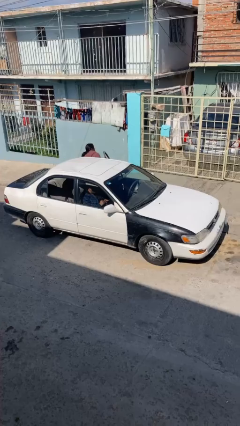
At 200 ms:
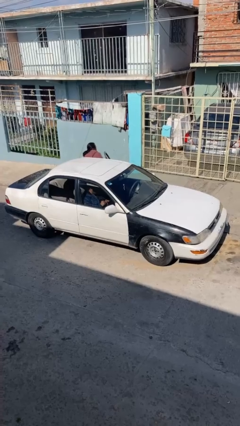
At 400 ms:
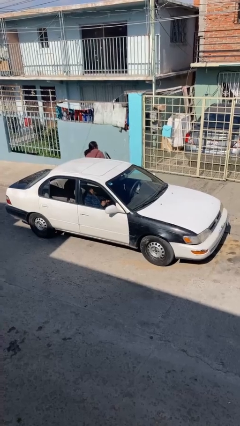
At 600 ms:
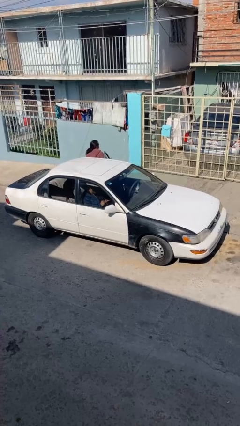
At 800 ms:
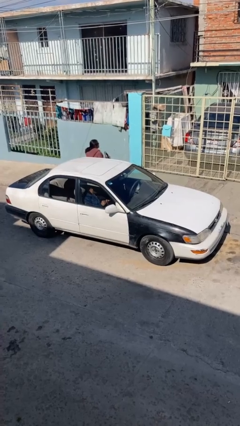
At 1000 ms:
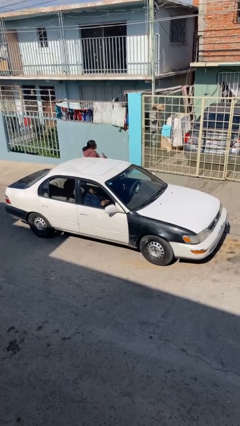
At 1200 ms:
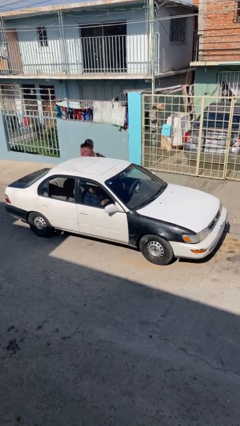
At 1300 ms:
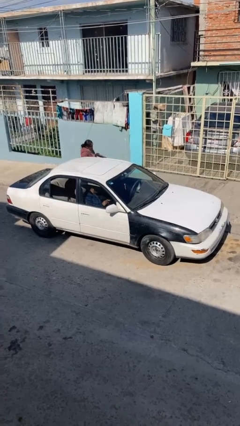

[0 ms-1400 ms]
car drops off person

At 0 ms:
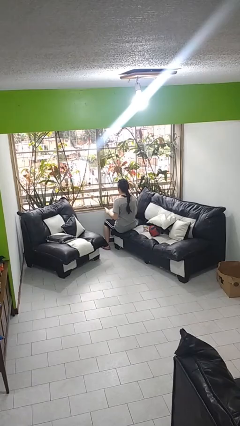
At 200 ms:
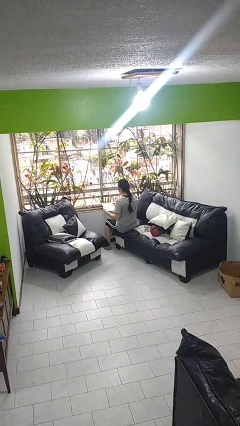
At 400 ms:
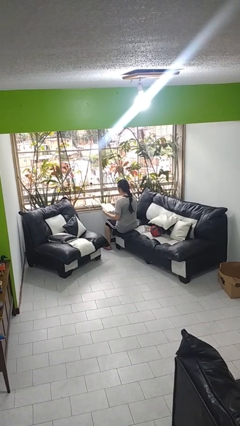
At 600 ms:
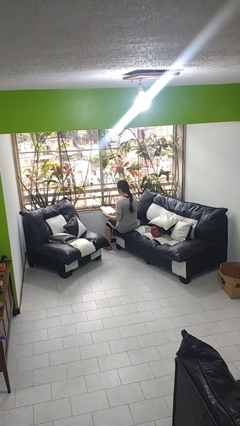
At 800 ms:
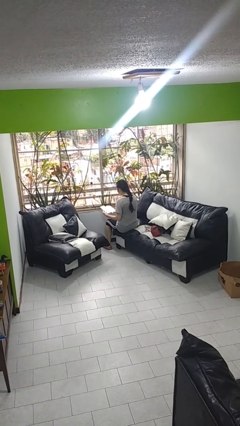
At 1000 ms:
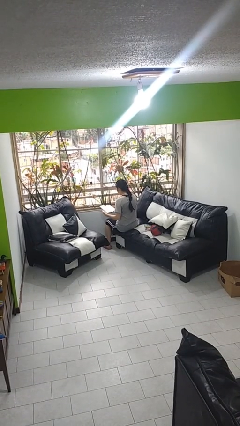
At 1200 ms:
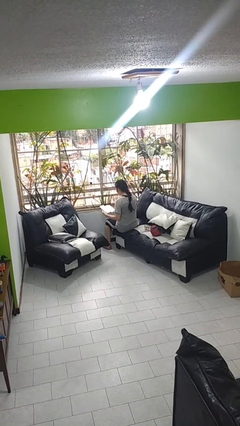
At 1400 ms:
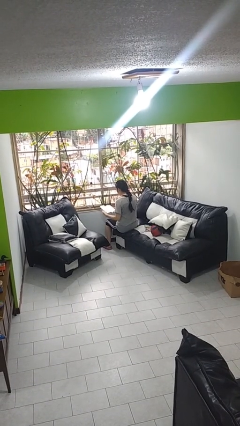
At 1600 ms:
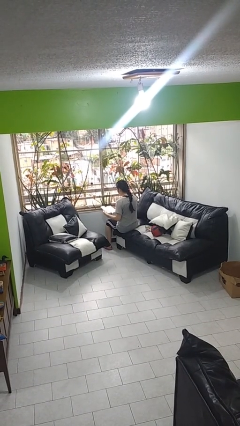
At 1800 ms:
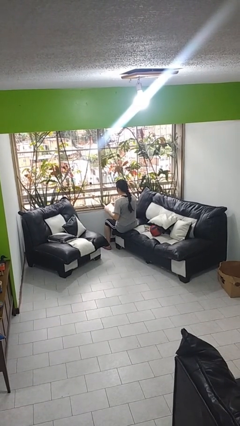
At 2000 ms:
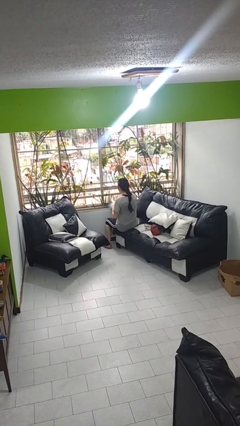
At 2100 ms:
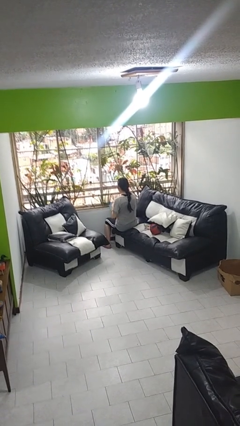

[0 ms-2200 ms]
person reads book

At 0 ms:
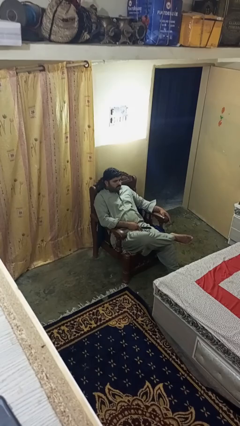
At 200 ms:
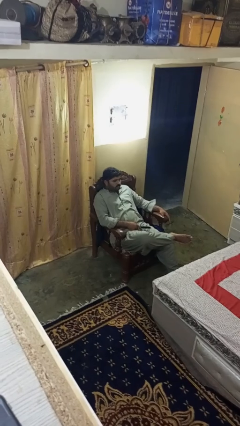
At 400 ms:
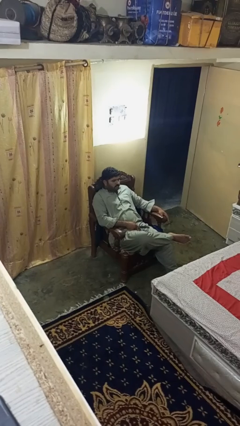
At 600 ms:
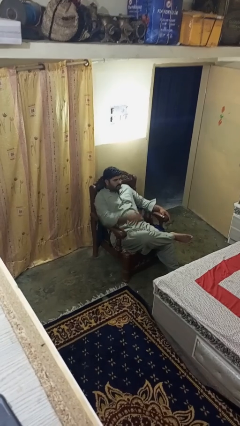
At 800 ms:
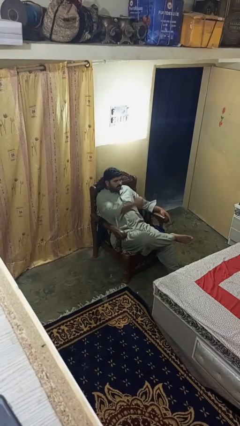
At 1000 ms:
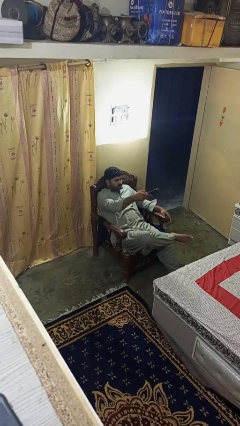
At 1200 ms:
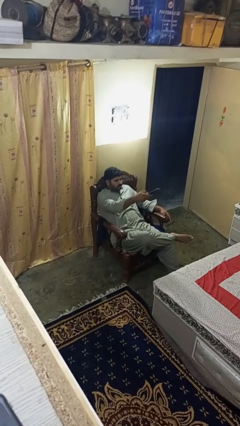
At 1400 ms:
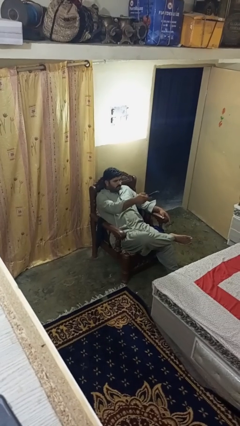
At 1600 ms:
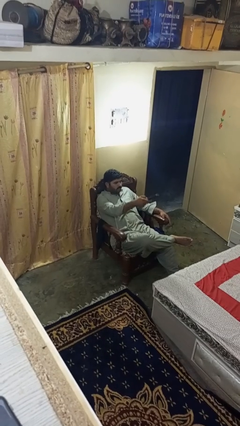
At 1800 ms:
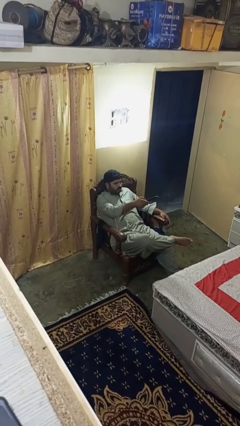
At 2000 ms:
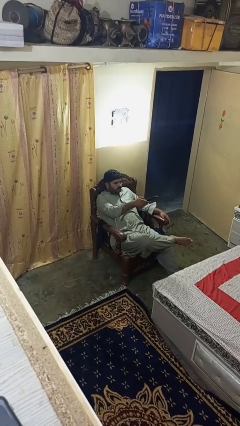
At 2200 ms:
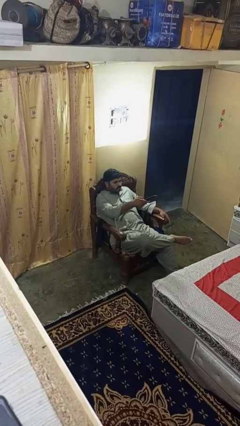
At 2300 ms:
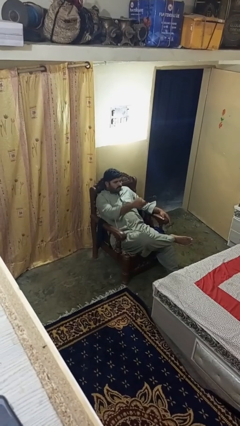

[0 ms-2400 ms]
person uses television remote

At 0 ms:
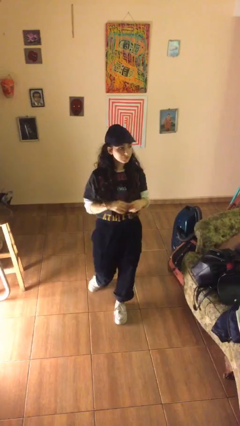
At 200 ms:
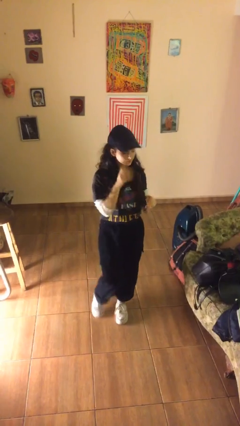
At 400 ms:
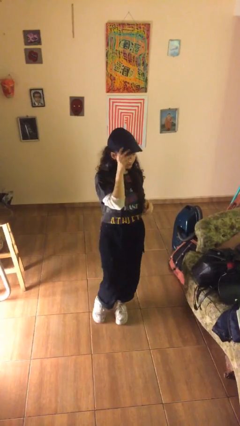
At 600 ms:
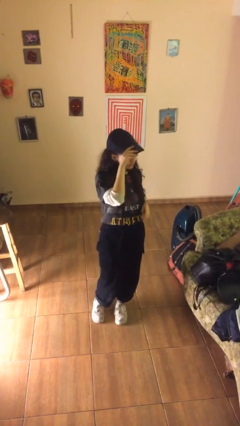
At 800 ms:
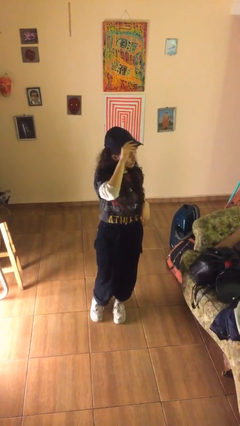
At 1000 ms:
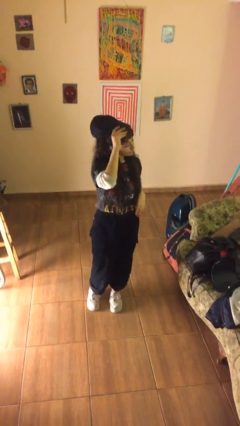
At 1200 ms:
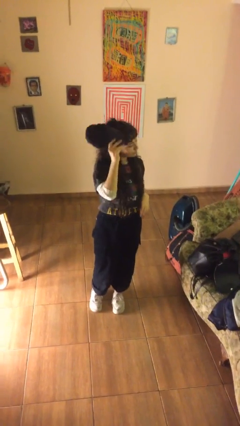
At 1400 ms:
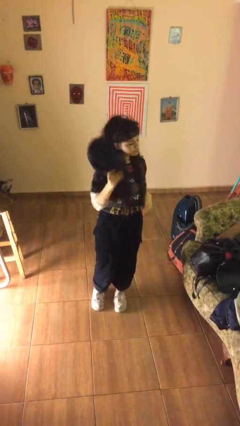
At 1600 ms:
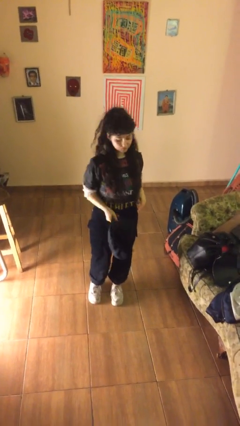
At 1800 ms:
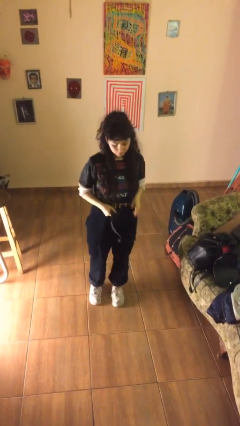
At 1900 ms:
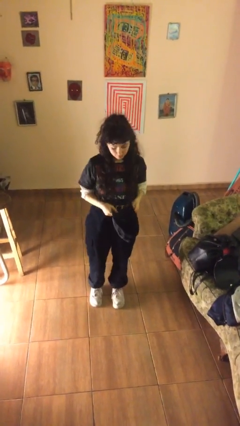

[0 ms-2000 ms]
person takes off hat

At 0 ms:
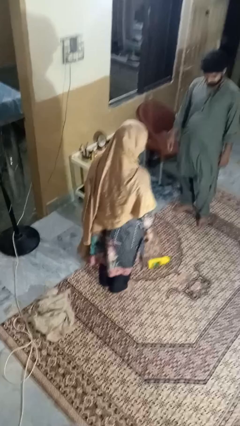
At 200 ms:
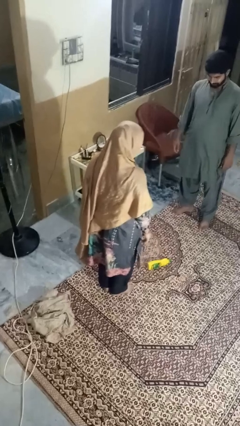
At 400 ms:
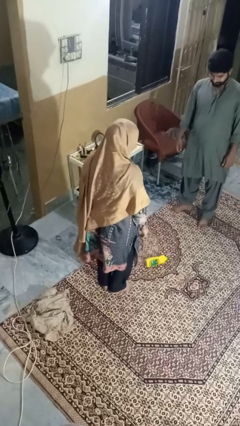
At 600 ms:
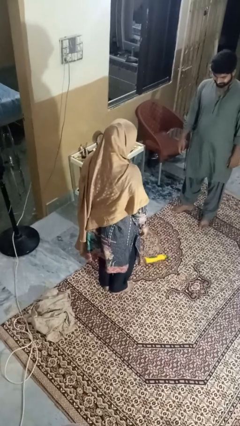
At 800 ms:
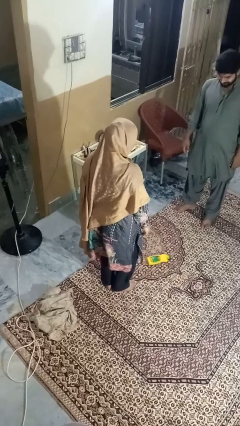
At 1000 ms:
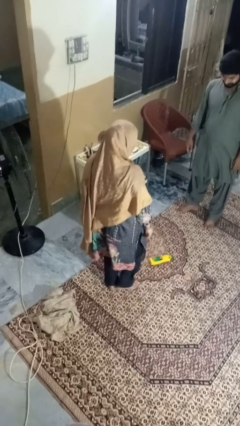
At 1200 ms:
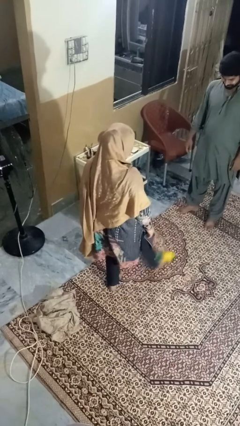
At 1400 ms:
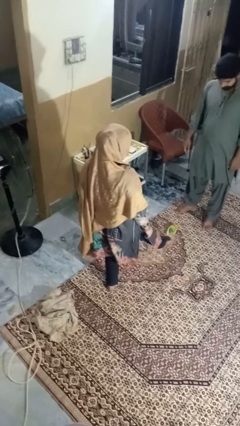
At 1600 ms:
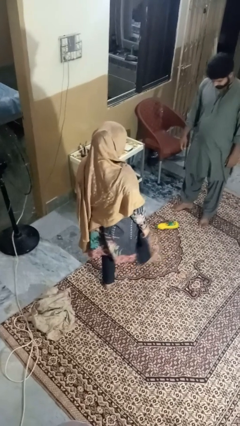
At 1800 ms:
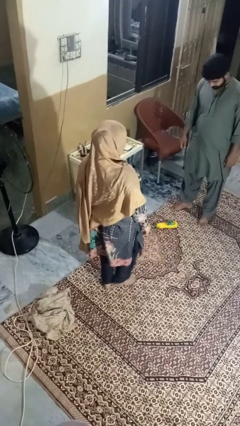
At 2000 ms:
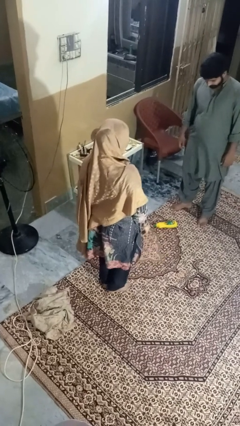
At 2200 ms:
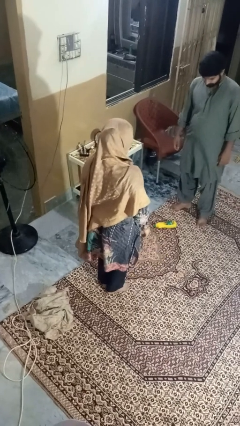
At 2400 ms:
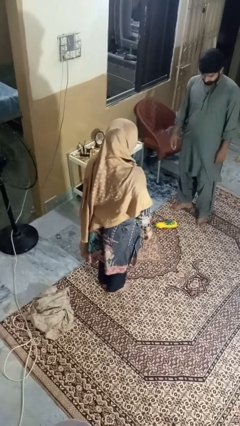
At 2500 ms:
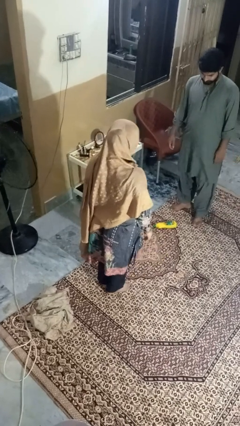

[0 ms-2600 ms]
person kicks object to person

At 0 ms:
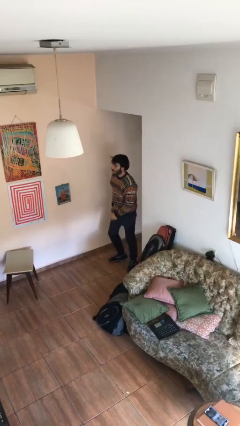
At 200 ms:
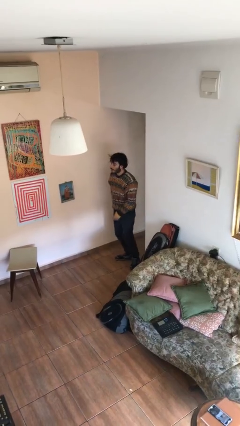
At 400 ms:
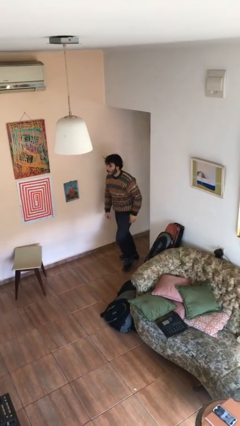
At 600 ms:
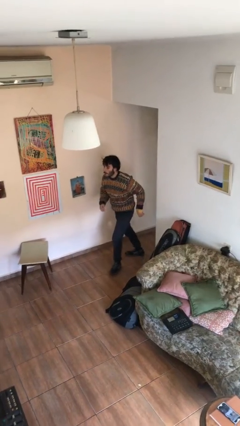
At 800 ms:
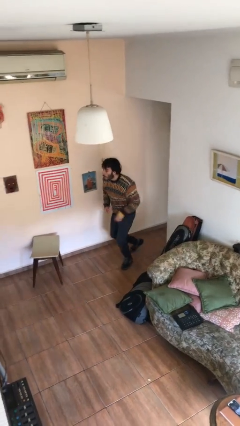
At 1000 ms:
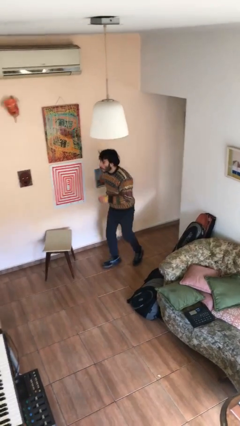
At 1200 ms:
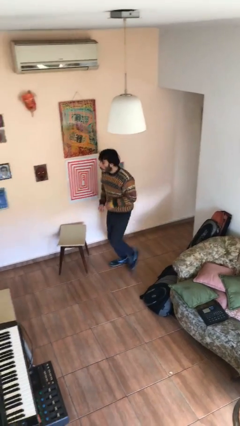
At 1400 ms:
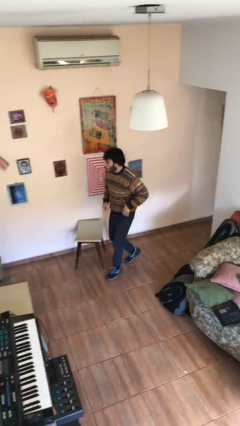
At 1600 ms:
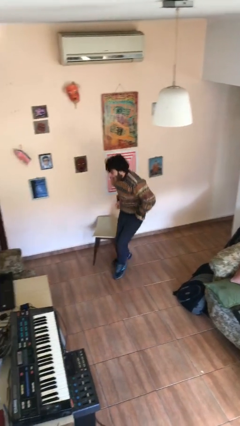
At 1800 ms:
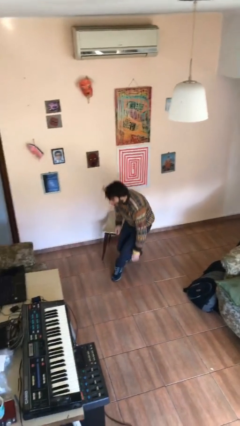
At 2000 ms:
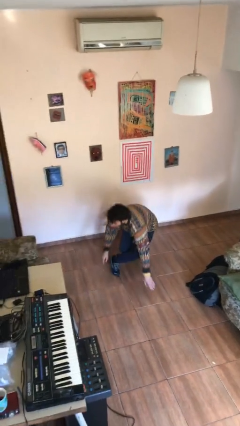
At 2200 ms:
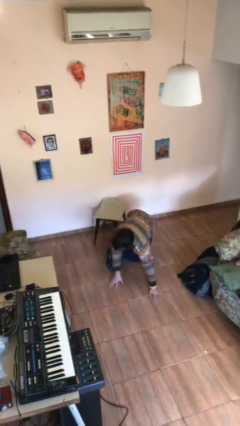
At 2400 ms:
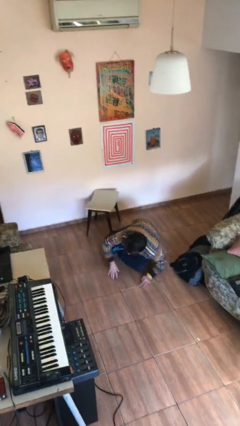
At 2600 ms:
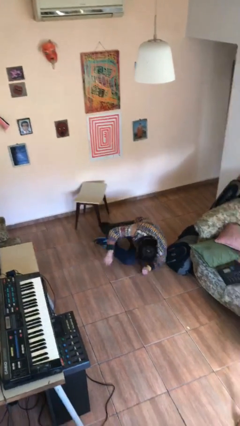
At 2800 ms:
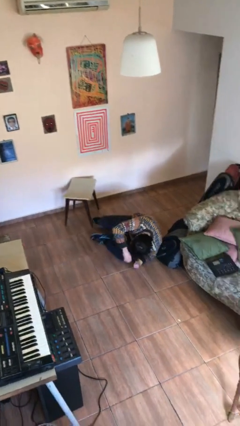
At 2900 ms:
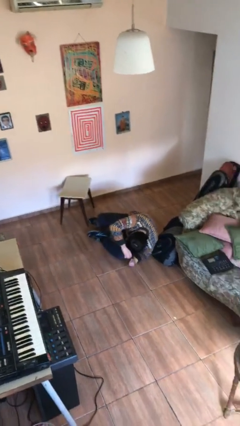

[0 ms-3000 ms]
person trips on object on floor

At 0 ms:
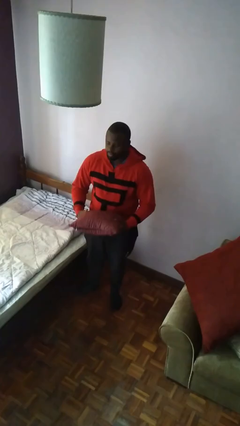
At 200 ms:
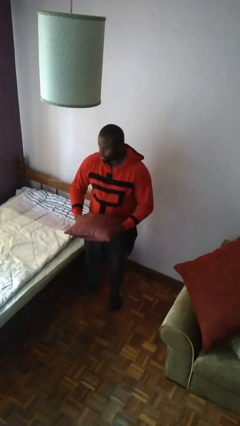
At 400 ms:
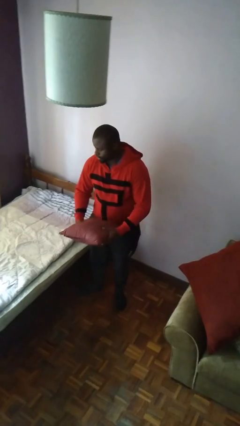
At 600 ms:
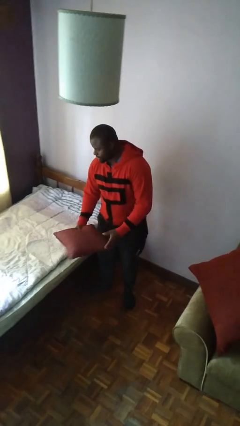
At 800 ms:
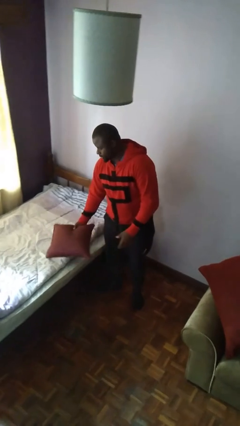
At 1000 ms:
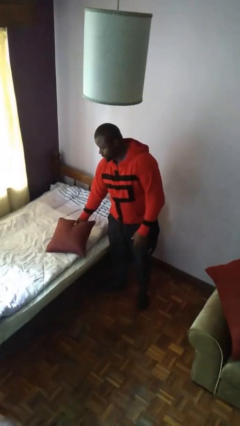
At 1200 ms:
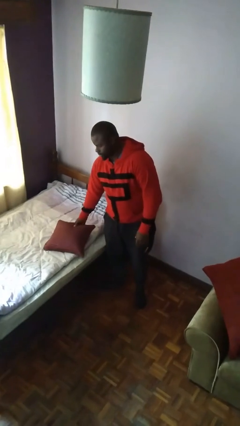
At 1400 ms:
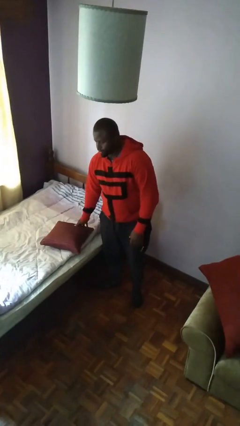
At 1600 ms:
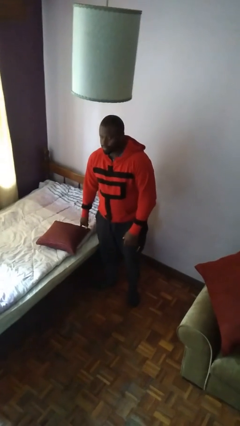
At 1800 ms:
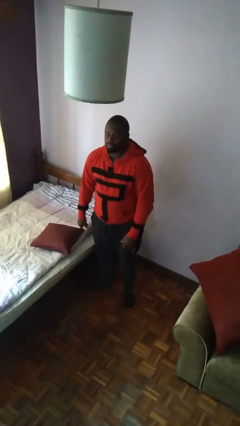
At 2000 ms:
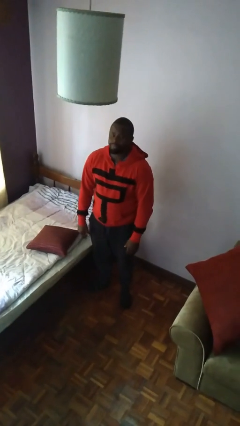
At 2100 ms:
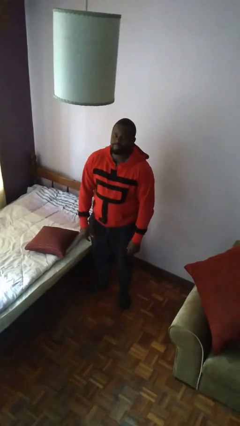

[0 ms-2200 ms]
person puts down object on bed

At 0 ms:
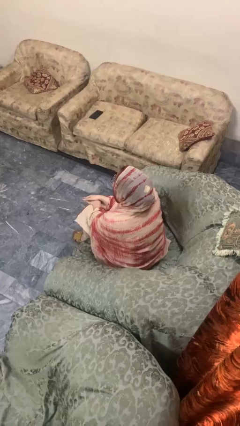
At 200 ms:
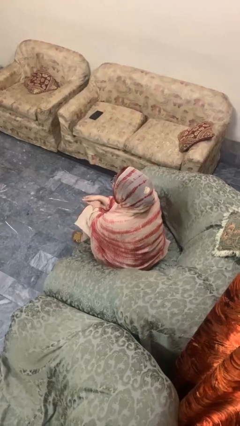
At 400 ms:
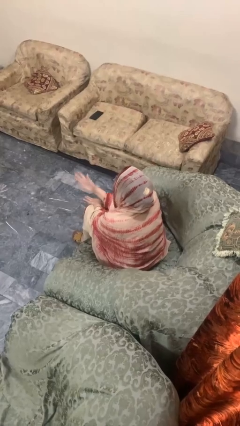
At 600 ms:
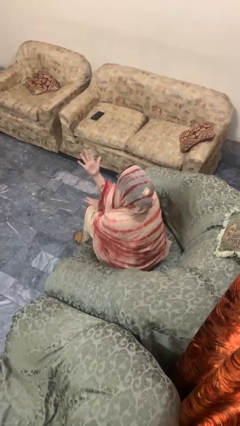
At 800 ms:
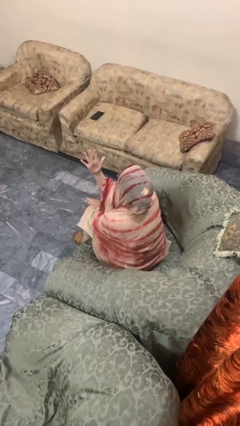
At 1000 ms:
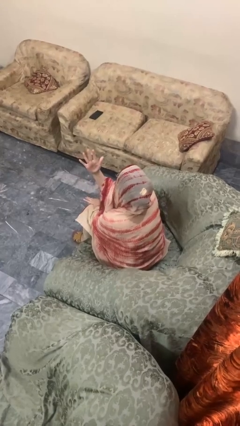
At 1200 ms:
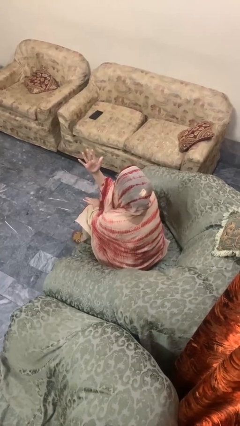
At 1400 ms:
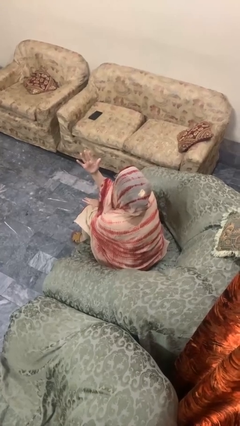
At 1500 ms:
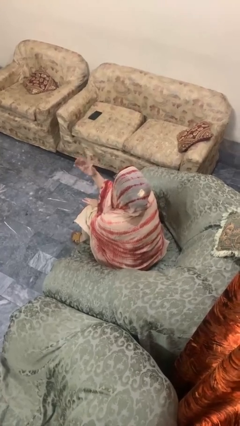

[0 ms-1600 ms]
person gestures number five
